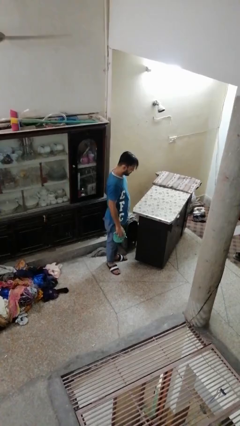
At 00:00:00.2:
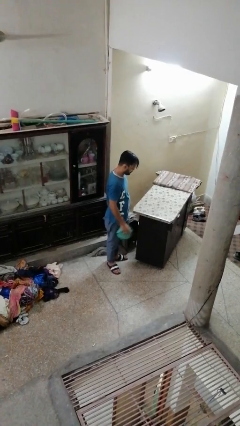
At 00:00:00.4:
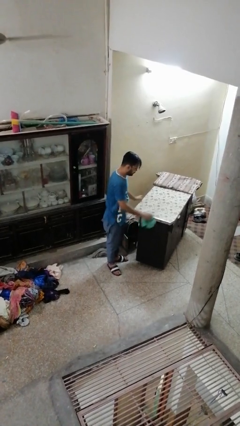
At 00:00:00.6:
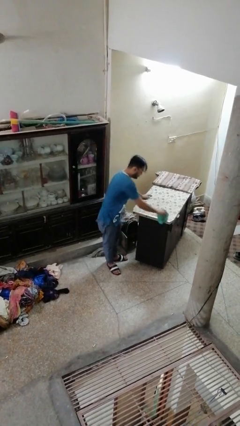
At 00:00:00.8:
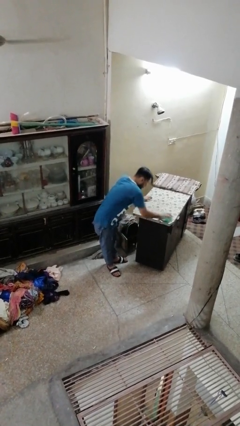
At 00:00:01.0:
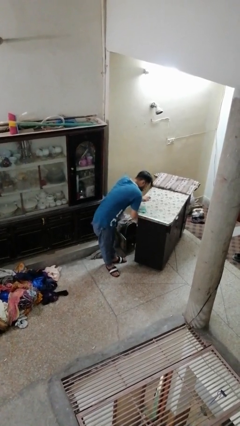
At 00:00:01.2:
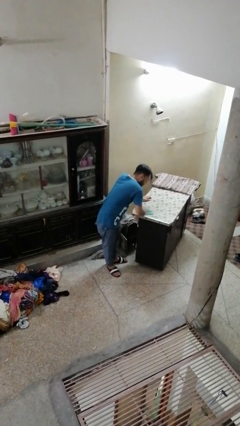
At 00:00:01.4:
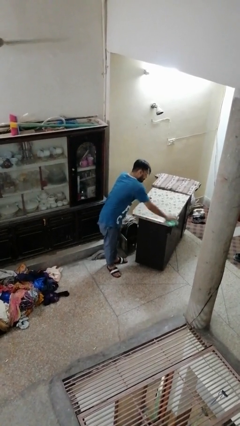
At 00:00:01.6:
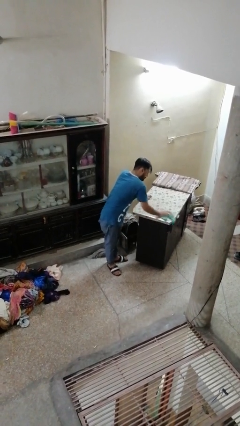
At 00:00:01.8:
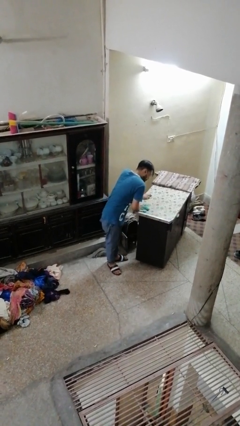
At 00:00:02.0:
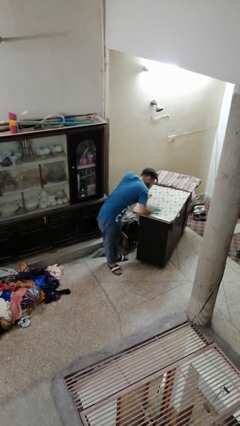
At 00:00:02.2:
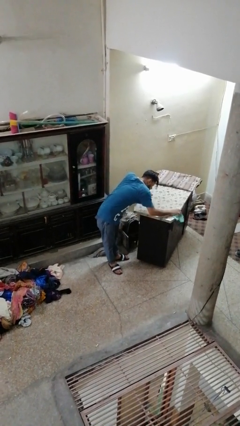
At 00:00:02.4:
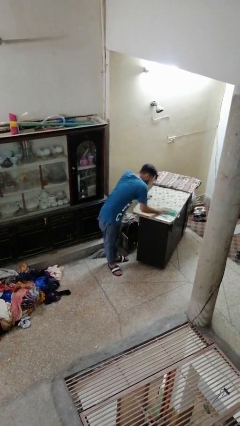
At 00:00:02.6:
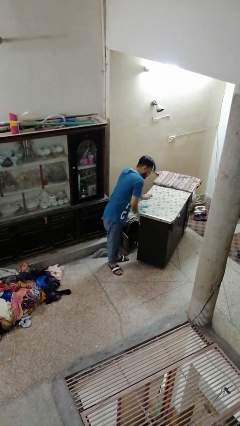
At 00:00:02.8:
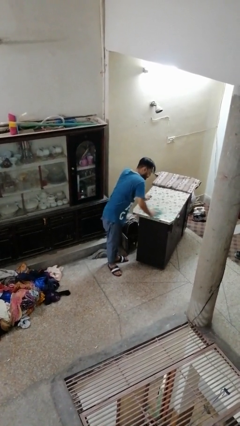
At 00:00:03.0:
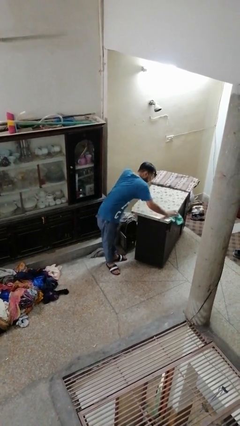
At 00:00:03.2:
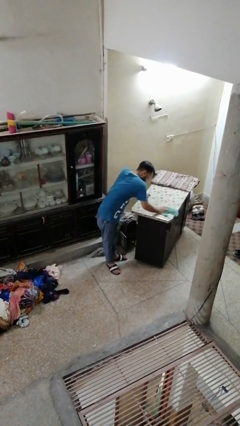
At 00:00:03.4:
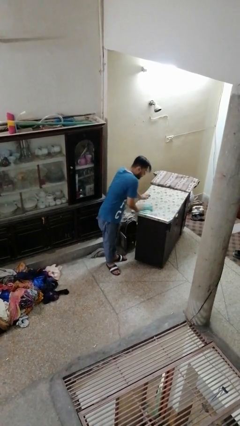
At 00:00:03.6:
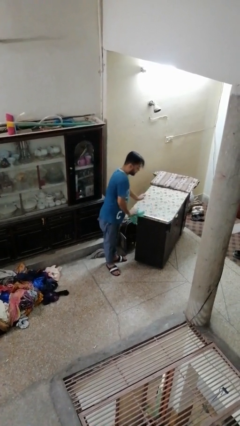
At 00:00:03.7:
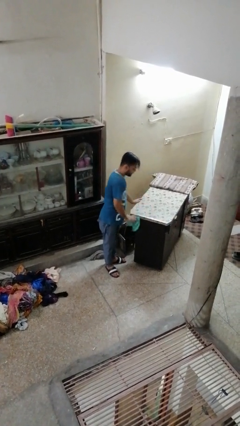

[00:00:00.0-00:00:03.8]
person cleans table with rag

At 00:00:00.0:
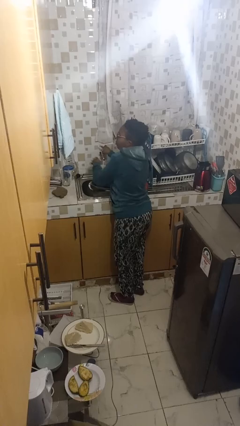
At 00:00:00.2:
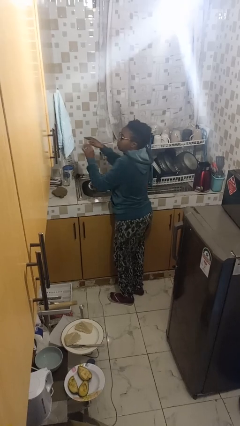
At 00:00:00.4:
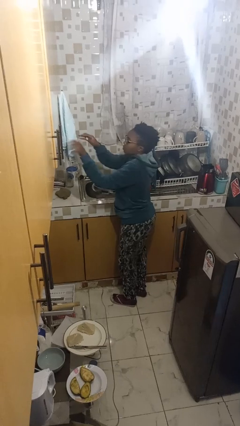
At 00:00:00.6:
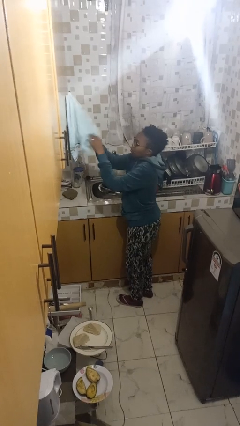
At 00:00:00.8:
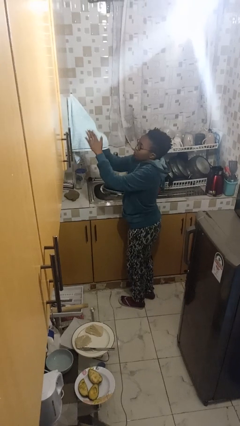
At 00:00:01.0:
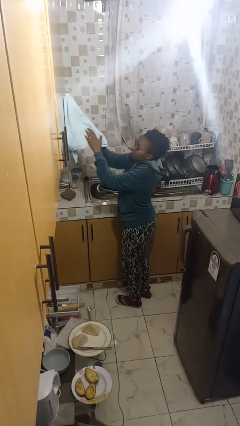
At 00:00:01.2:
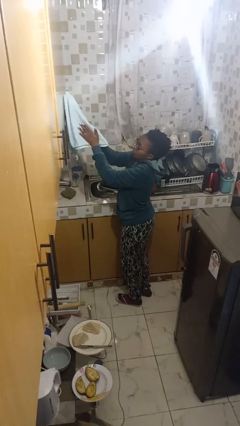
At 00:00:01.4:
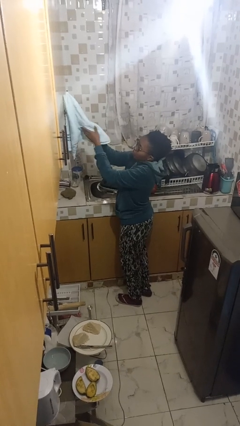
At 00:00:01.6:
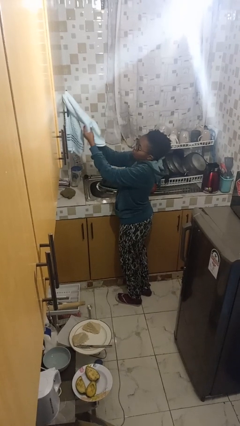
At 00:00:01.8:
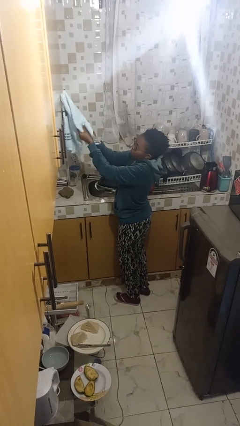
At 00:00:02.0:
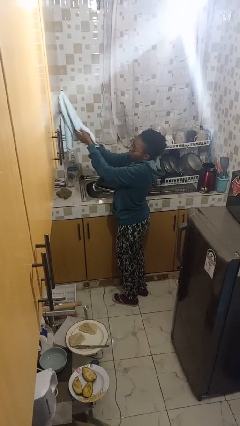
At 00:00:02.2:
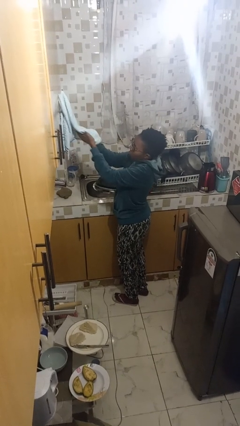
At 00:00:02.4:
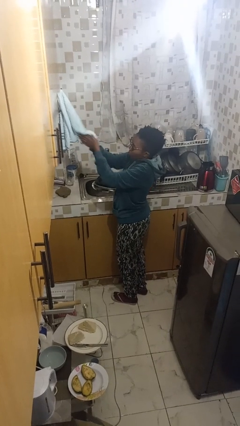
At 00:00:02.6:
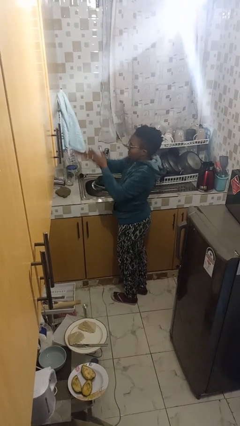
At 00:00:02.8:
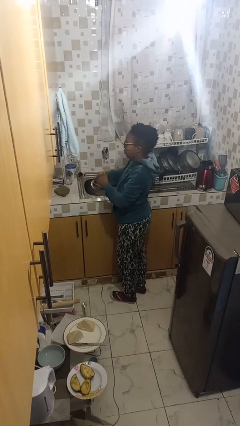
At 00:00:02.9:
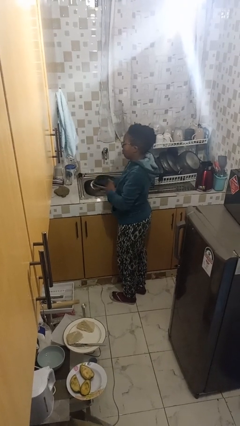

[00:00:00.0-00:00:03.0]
person dries hands with towel

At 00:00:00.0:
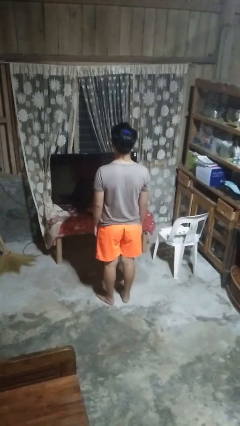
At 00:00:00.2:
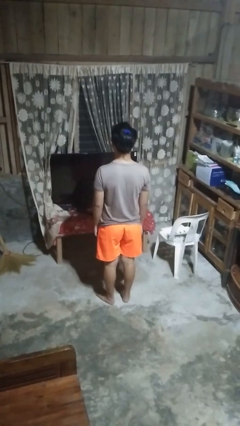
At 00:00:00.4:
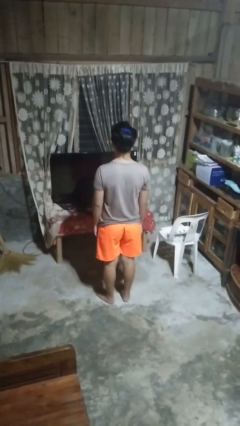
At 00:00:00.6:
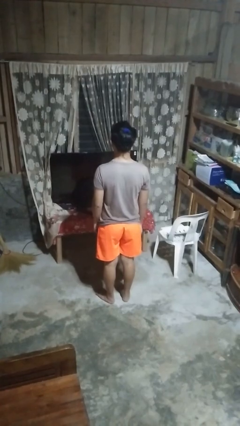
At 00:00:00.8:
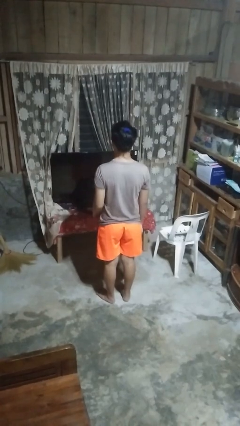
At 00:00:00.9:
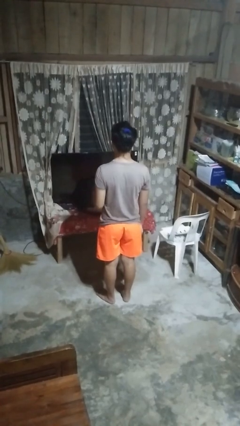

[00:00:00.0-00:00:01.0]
person gestures number five

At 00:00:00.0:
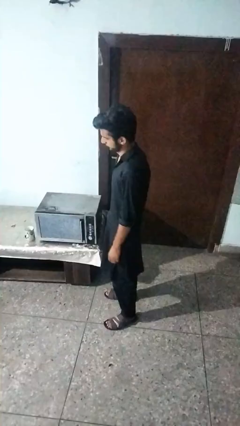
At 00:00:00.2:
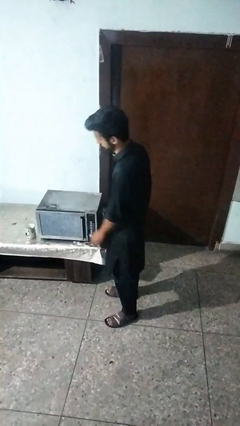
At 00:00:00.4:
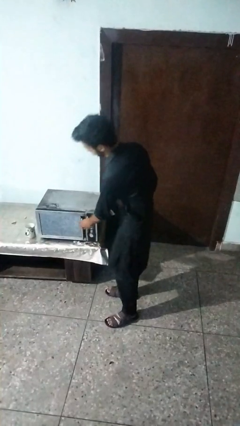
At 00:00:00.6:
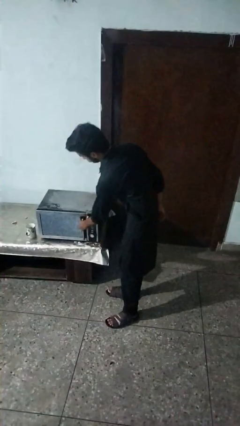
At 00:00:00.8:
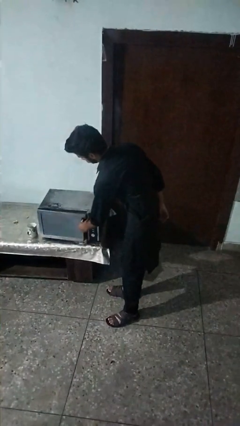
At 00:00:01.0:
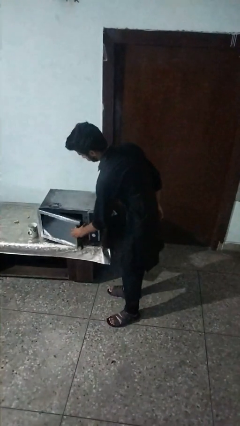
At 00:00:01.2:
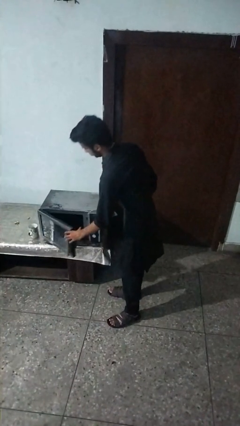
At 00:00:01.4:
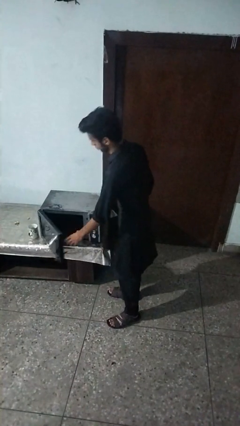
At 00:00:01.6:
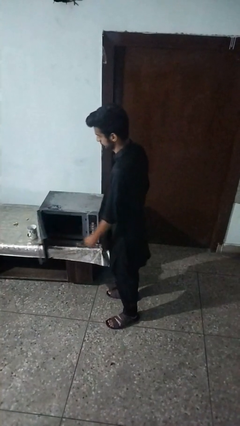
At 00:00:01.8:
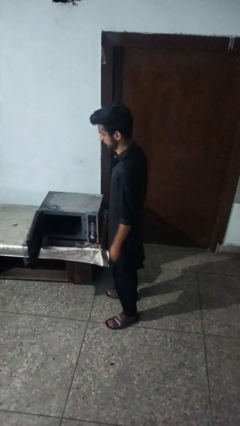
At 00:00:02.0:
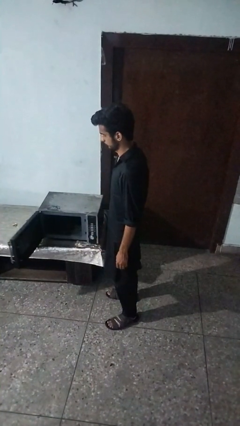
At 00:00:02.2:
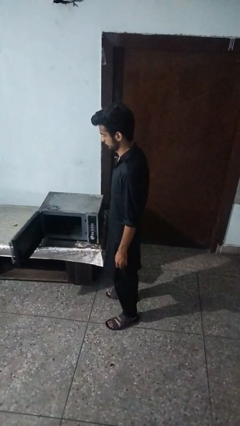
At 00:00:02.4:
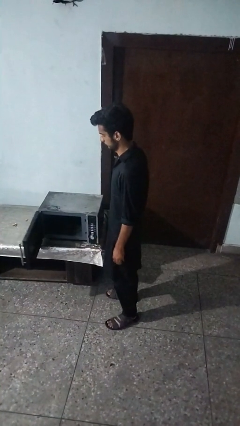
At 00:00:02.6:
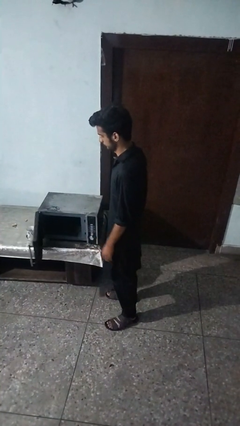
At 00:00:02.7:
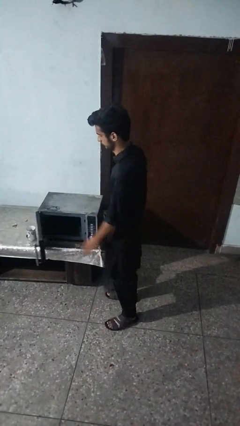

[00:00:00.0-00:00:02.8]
person opens oven door

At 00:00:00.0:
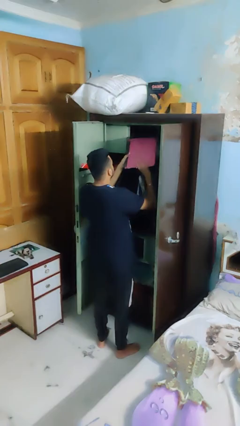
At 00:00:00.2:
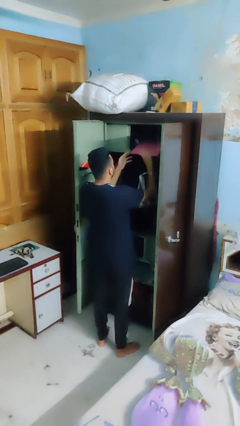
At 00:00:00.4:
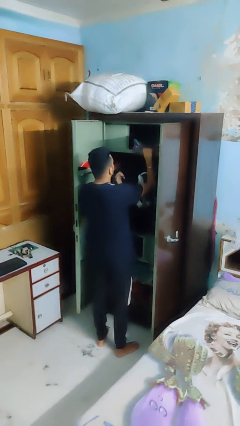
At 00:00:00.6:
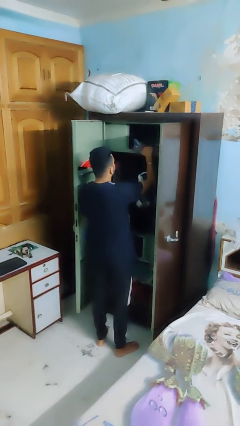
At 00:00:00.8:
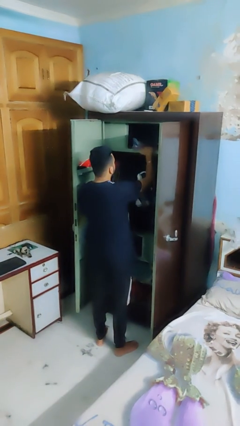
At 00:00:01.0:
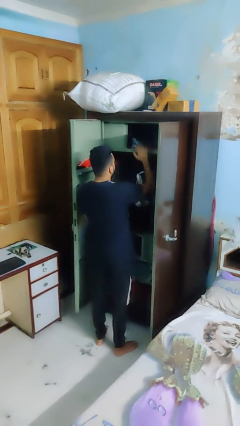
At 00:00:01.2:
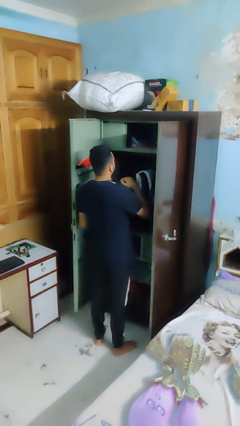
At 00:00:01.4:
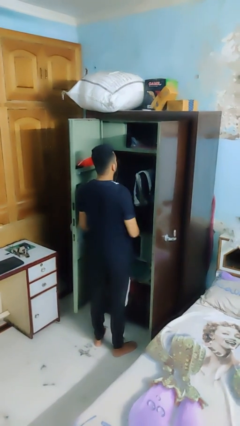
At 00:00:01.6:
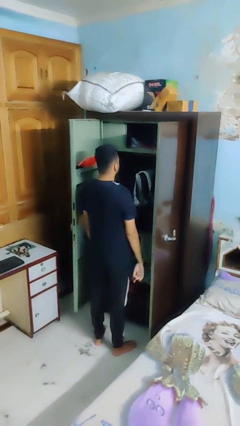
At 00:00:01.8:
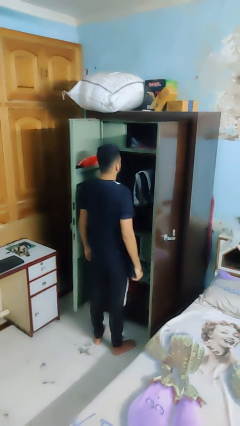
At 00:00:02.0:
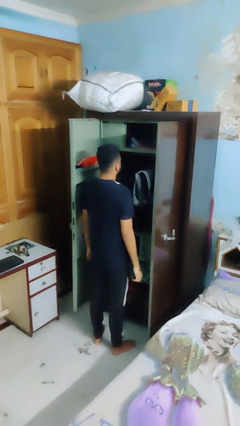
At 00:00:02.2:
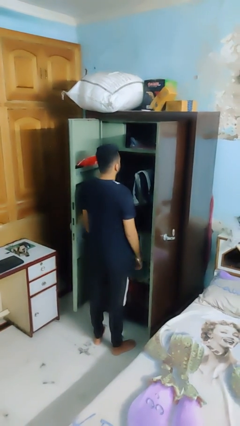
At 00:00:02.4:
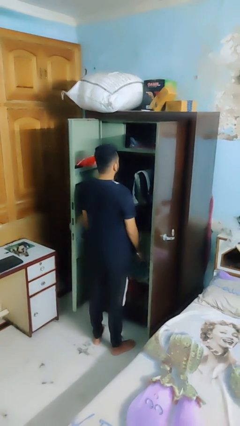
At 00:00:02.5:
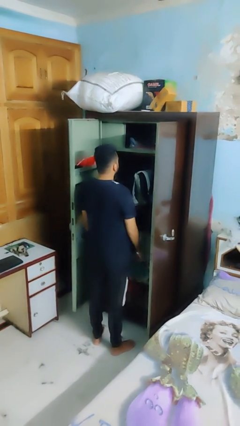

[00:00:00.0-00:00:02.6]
person puts down object on shelf

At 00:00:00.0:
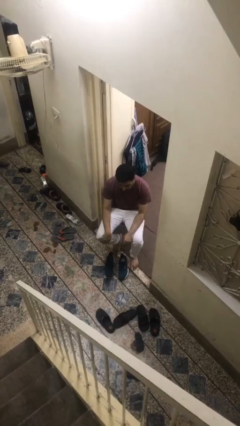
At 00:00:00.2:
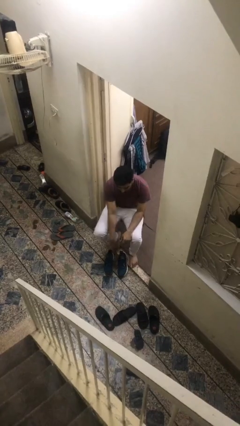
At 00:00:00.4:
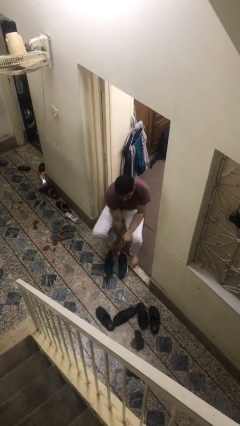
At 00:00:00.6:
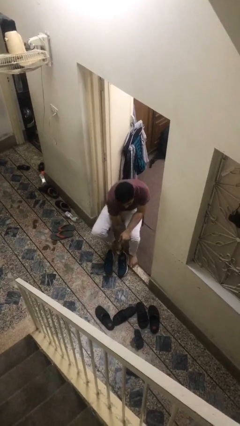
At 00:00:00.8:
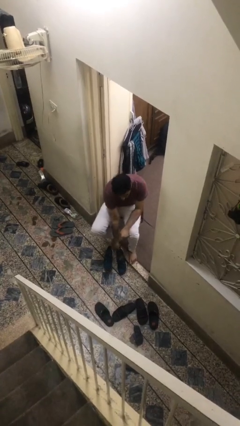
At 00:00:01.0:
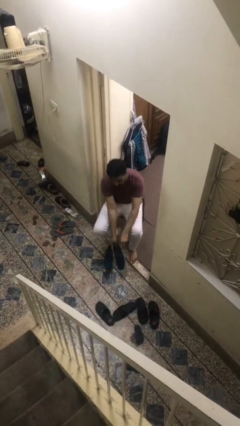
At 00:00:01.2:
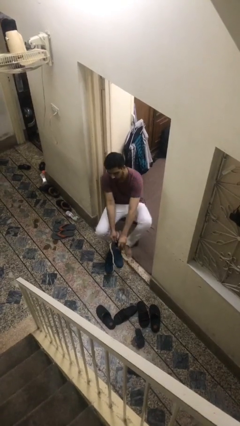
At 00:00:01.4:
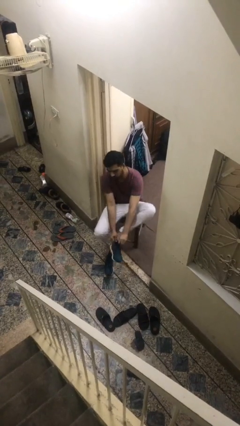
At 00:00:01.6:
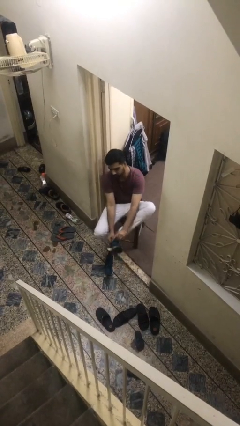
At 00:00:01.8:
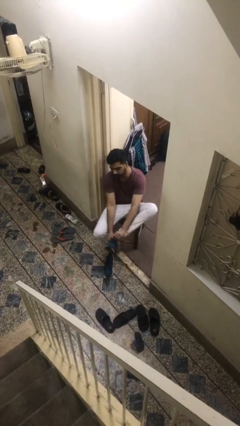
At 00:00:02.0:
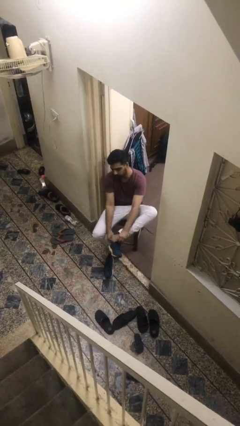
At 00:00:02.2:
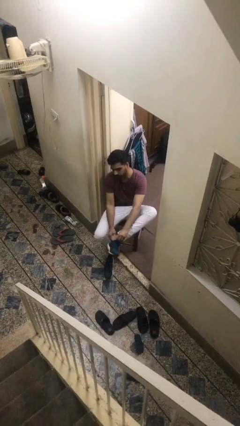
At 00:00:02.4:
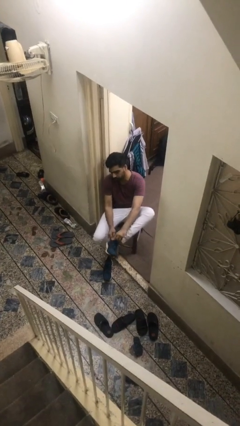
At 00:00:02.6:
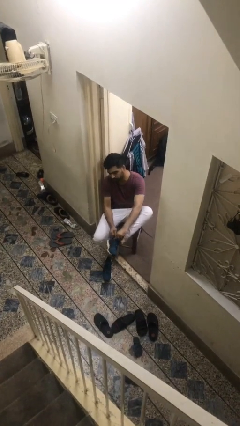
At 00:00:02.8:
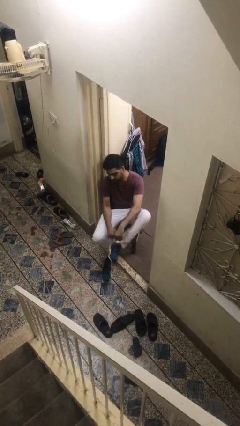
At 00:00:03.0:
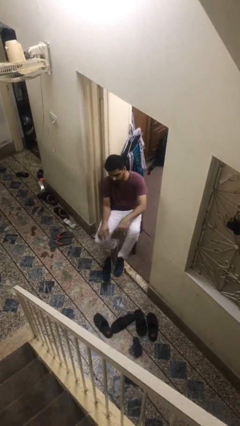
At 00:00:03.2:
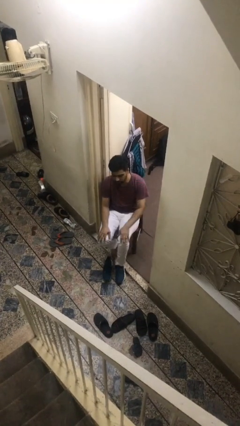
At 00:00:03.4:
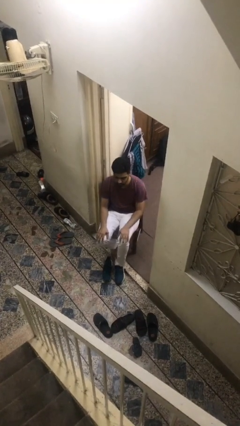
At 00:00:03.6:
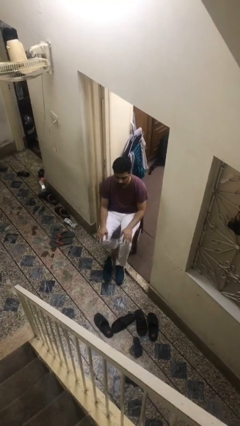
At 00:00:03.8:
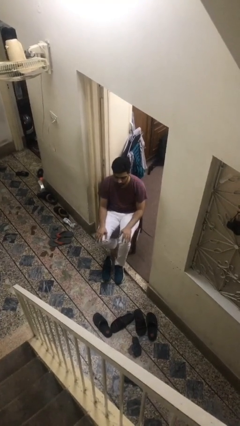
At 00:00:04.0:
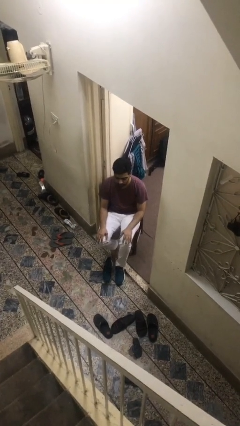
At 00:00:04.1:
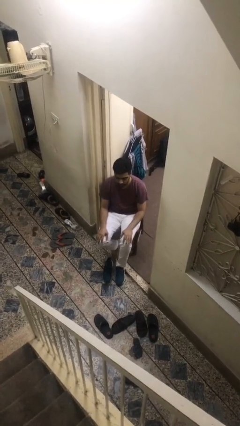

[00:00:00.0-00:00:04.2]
person puts on shoes
